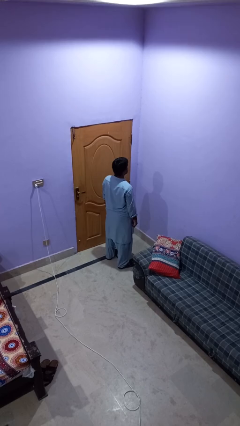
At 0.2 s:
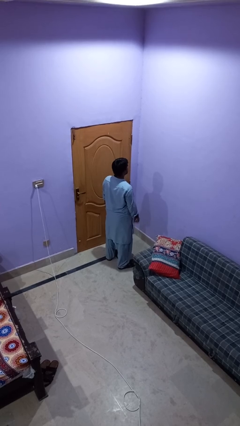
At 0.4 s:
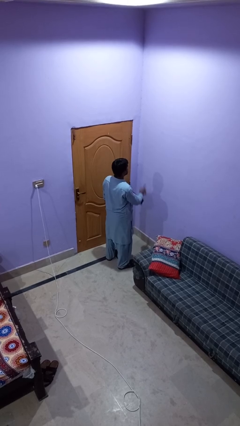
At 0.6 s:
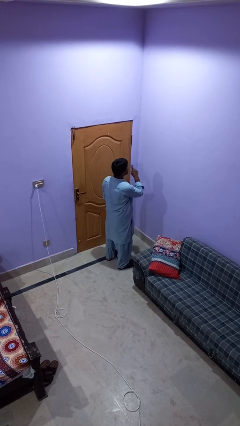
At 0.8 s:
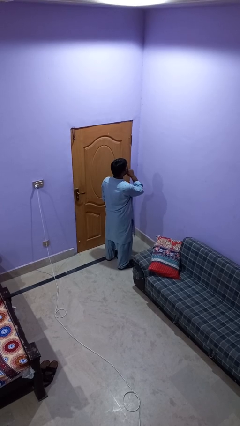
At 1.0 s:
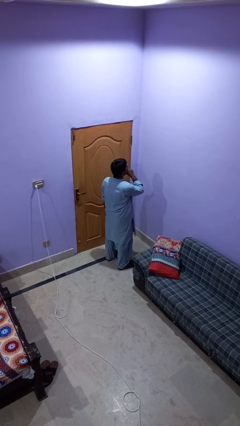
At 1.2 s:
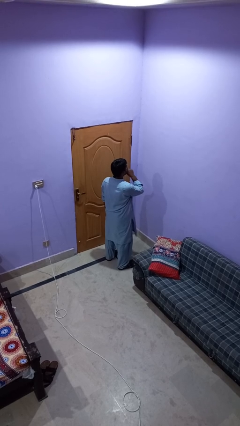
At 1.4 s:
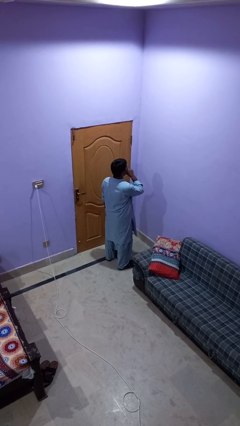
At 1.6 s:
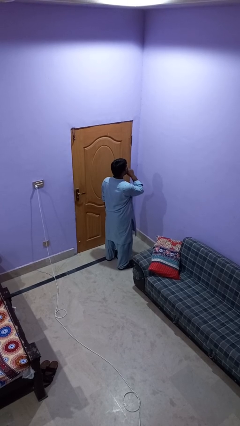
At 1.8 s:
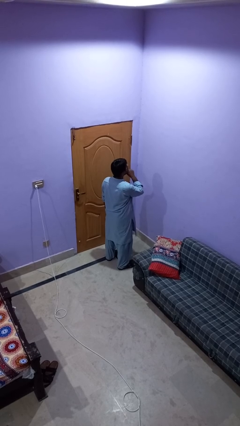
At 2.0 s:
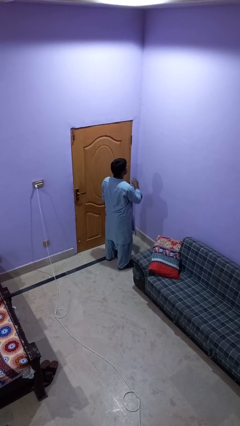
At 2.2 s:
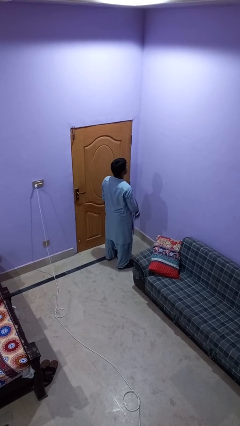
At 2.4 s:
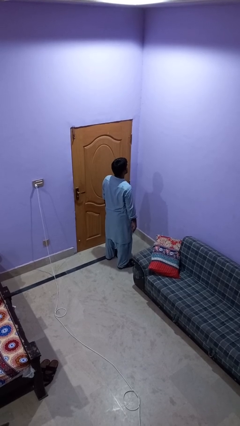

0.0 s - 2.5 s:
person gestures be quiet

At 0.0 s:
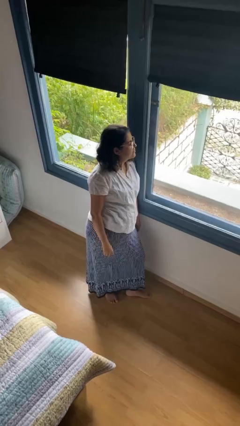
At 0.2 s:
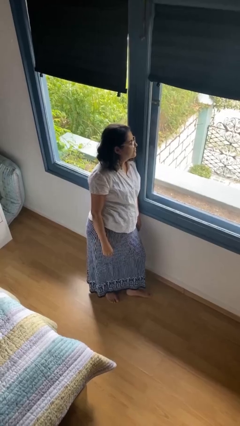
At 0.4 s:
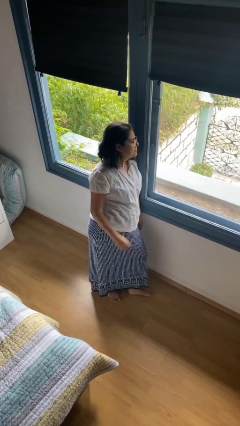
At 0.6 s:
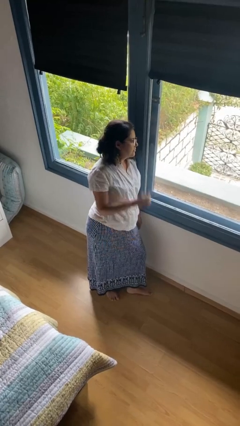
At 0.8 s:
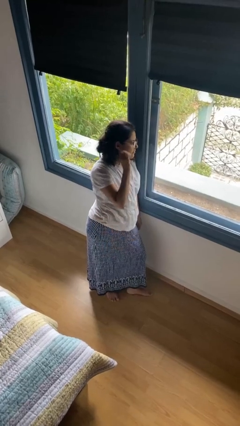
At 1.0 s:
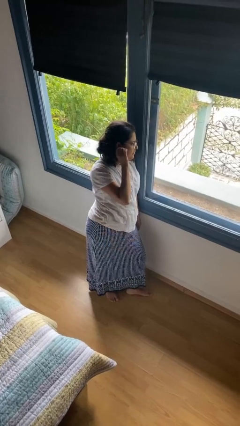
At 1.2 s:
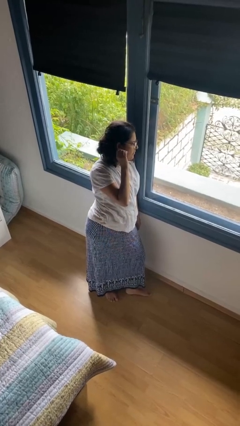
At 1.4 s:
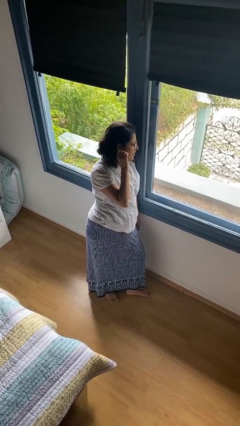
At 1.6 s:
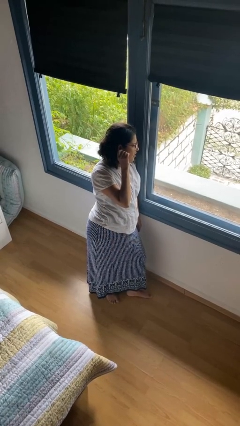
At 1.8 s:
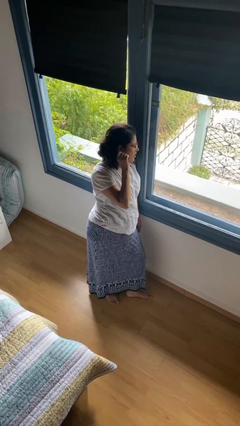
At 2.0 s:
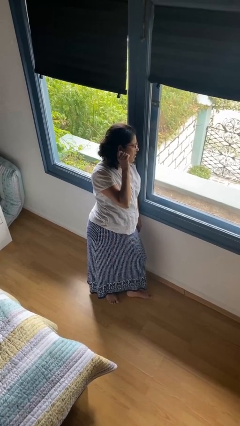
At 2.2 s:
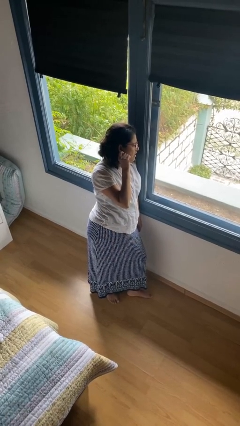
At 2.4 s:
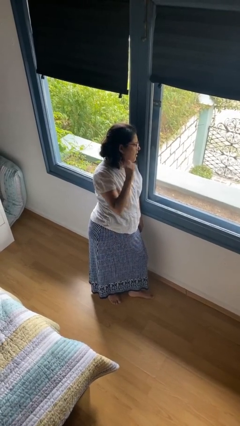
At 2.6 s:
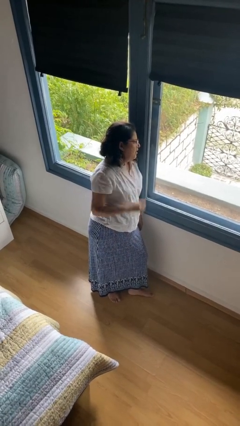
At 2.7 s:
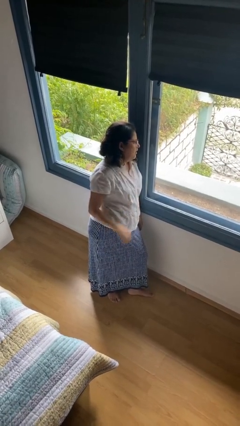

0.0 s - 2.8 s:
person touches earlobe

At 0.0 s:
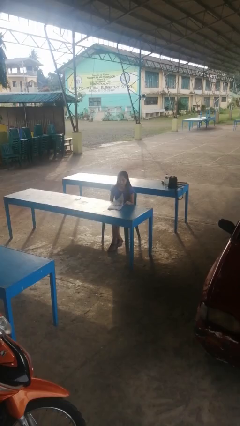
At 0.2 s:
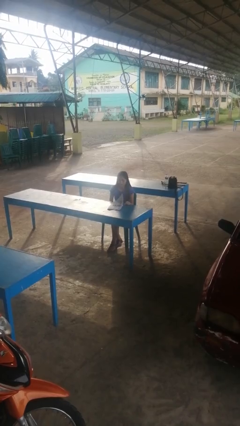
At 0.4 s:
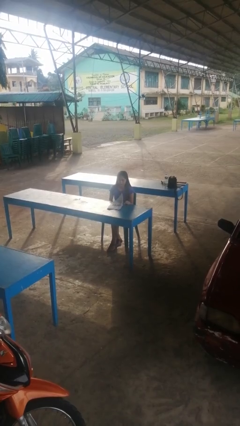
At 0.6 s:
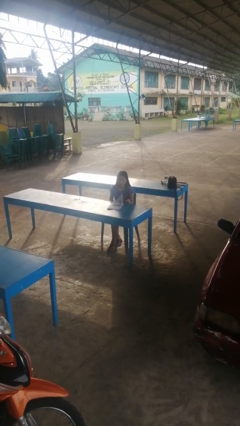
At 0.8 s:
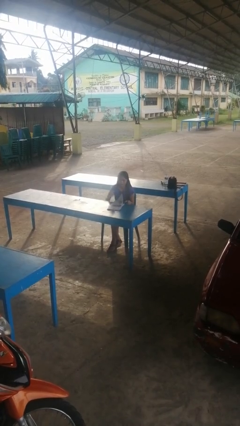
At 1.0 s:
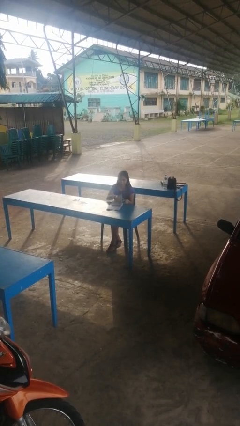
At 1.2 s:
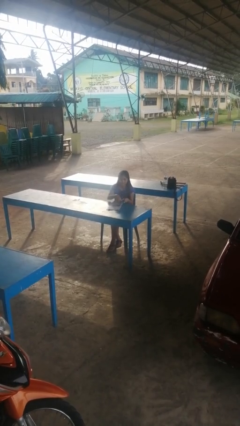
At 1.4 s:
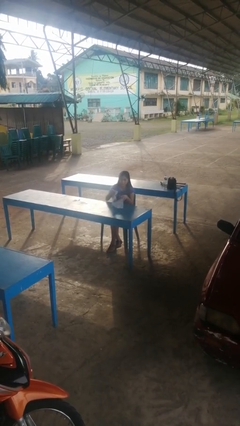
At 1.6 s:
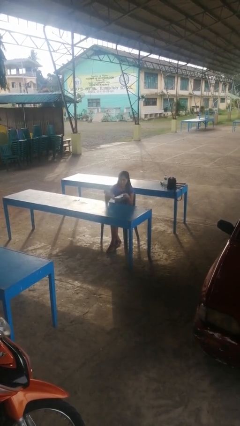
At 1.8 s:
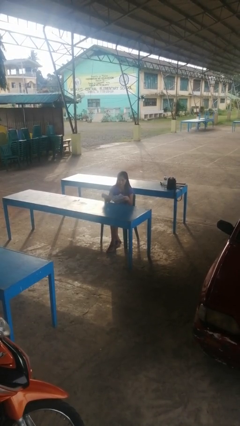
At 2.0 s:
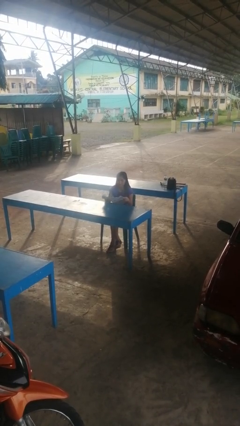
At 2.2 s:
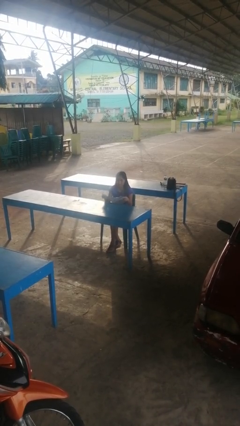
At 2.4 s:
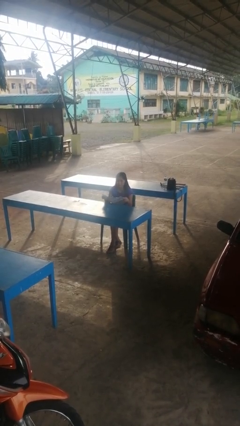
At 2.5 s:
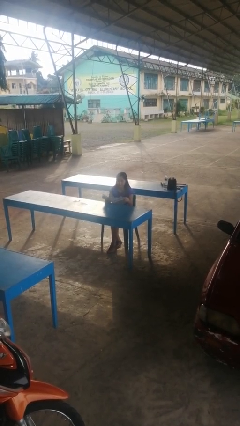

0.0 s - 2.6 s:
person reads newspaper

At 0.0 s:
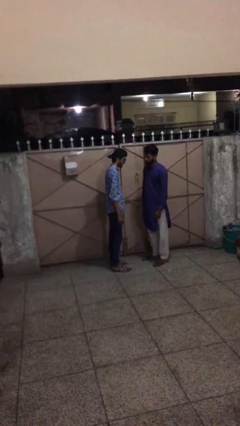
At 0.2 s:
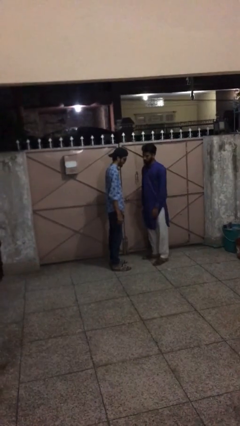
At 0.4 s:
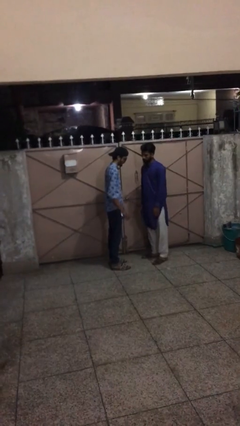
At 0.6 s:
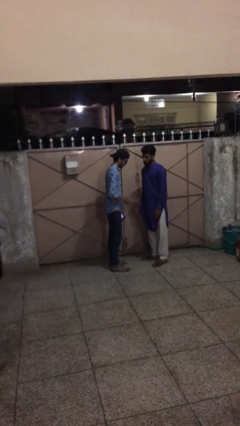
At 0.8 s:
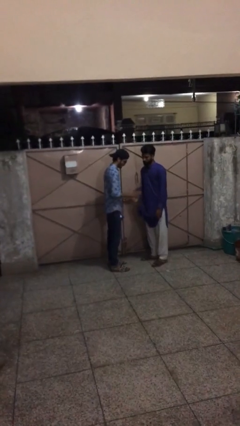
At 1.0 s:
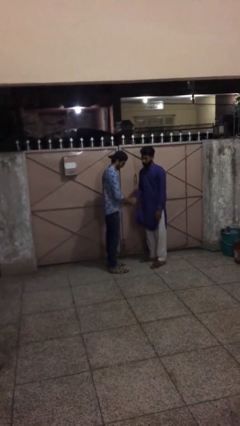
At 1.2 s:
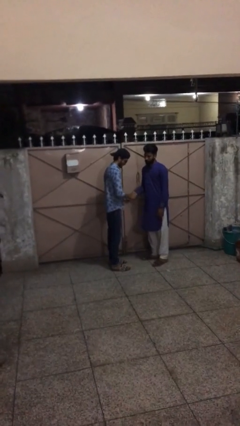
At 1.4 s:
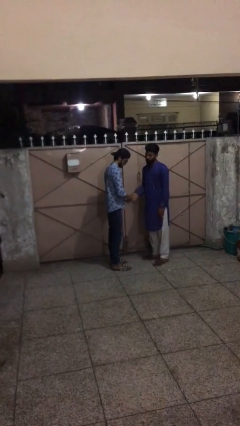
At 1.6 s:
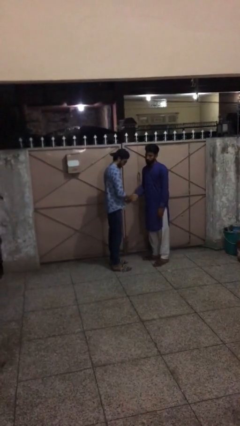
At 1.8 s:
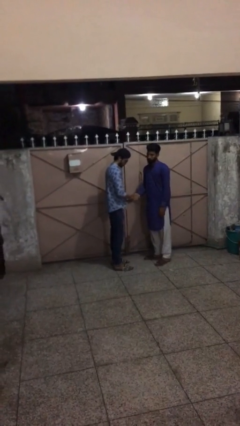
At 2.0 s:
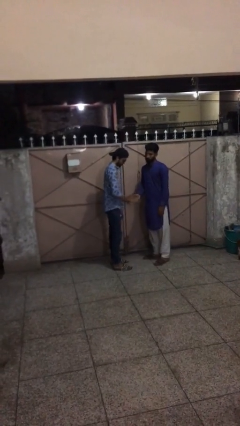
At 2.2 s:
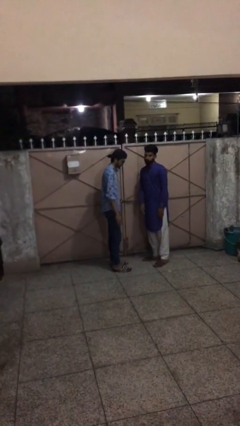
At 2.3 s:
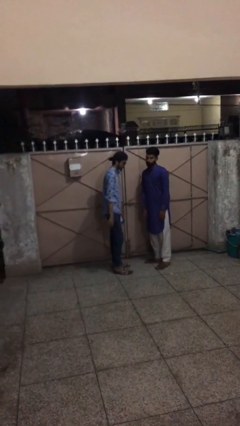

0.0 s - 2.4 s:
person shakes hand

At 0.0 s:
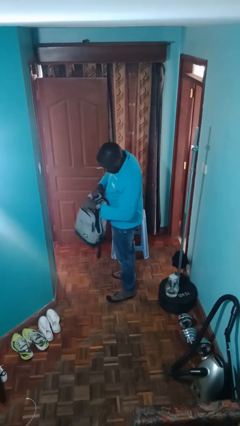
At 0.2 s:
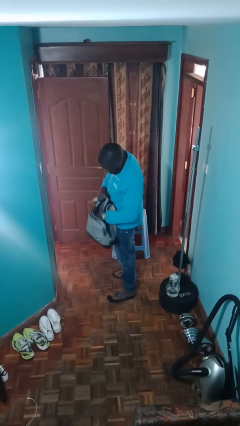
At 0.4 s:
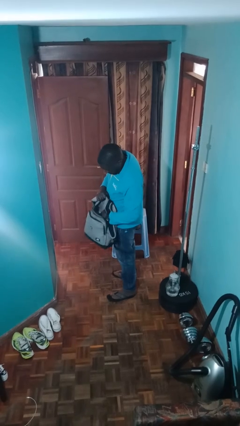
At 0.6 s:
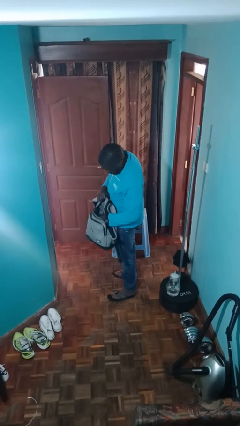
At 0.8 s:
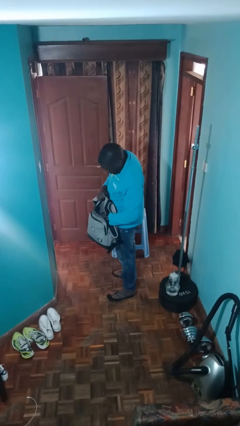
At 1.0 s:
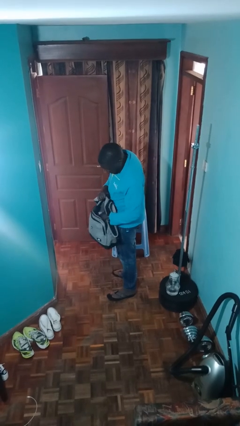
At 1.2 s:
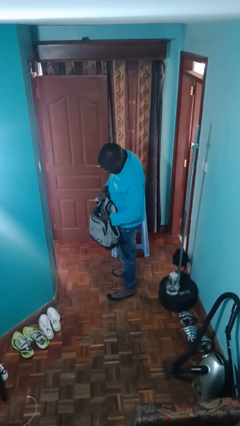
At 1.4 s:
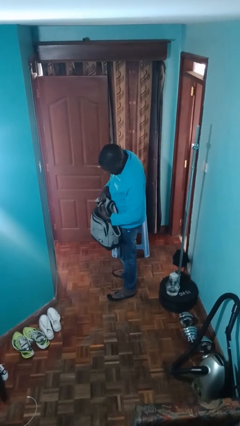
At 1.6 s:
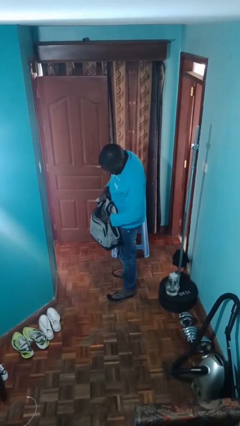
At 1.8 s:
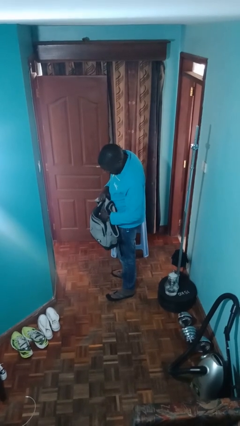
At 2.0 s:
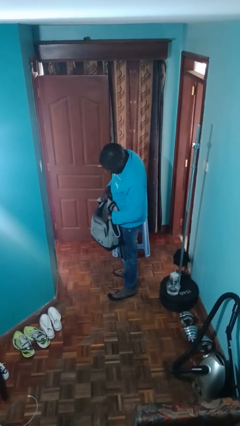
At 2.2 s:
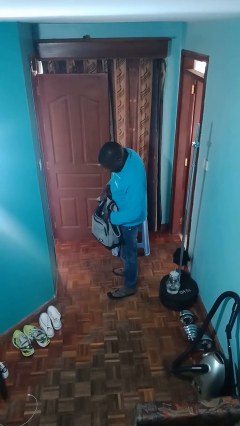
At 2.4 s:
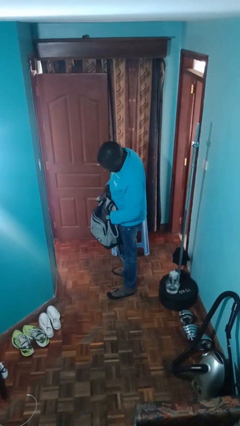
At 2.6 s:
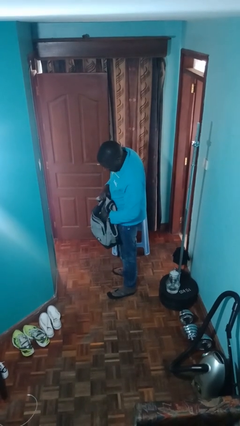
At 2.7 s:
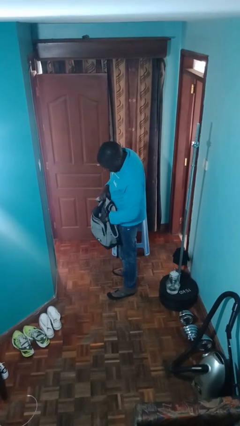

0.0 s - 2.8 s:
person searches in backpack

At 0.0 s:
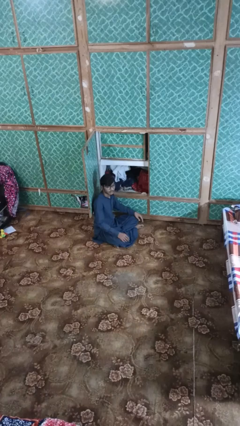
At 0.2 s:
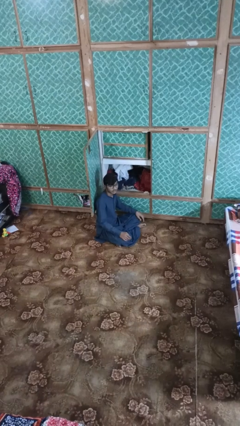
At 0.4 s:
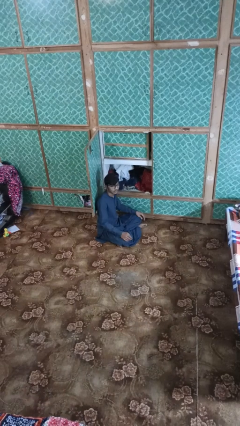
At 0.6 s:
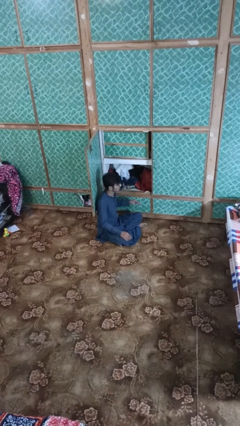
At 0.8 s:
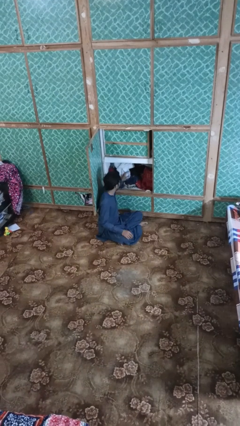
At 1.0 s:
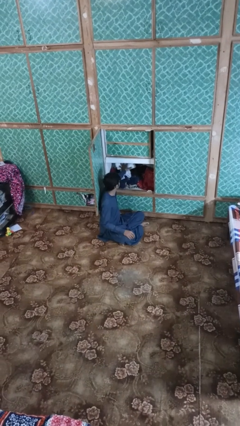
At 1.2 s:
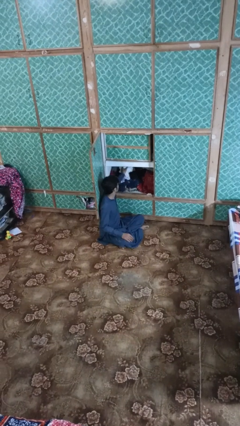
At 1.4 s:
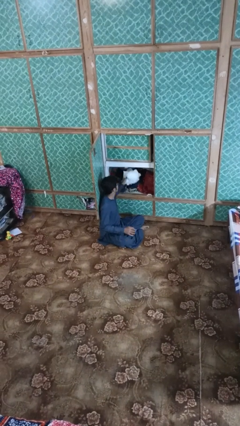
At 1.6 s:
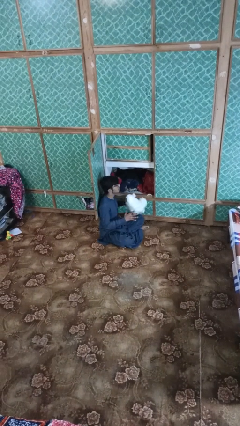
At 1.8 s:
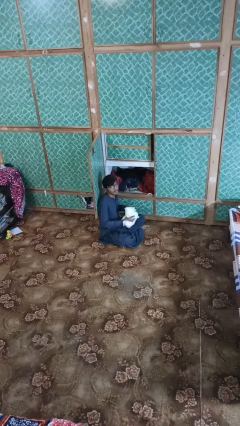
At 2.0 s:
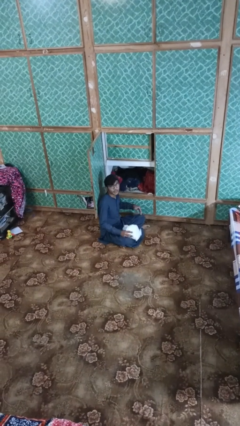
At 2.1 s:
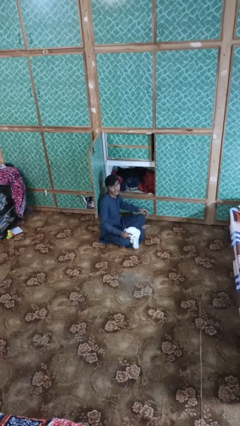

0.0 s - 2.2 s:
person takes clothes from dresser

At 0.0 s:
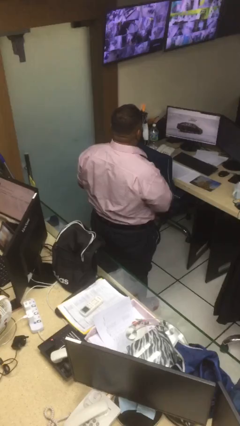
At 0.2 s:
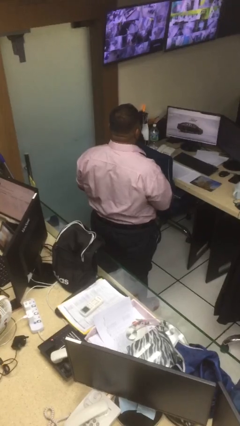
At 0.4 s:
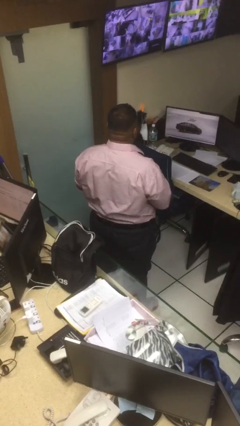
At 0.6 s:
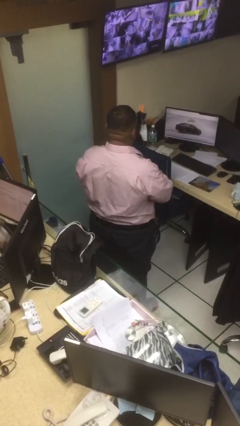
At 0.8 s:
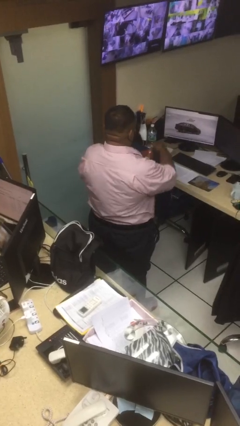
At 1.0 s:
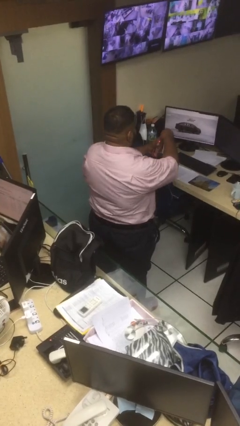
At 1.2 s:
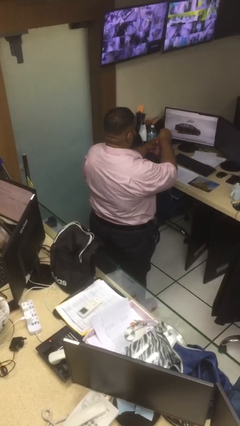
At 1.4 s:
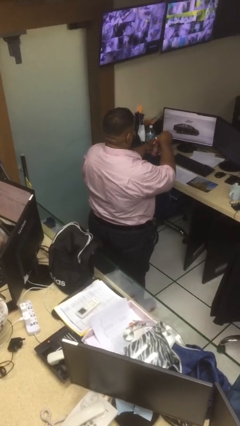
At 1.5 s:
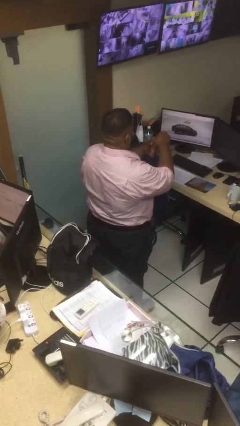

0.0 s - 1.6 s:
person opens beverage can

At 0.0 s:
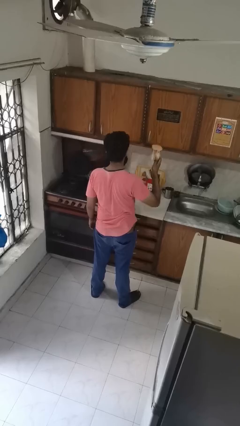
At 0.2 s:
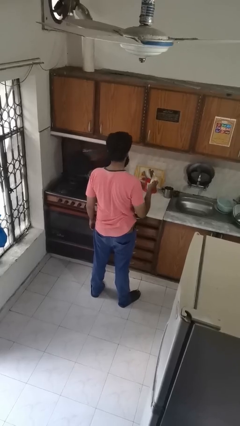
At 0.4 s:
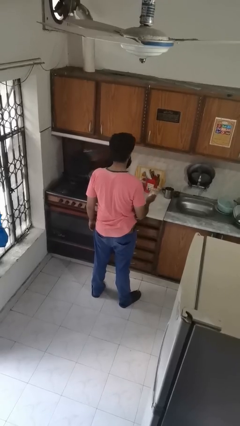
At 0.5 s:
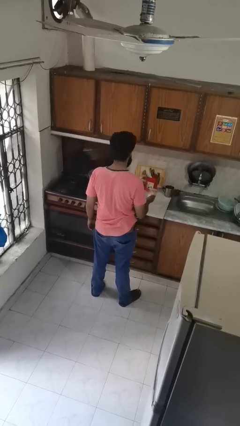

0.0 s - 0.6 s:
person puts down object on shelf
